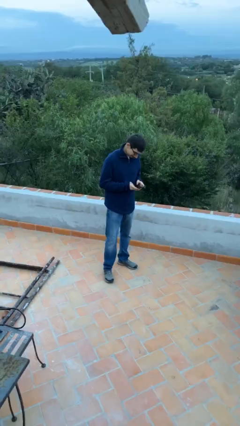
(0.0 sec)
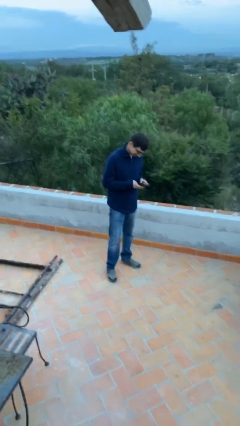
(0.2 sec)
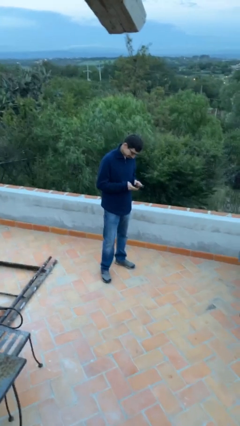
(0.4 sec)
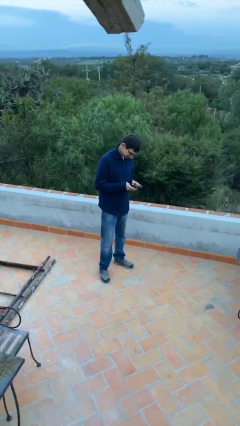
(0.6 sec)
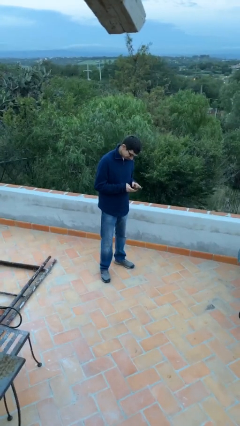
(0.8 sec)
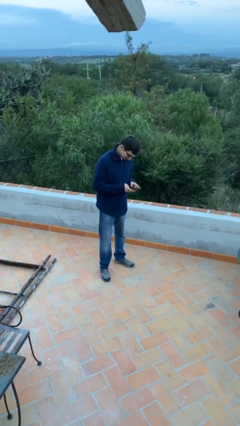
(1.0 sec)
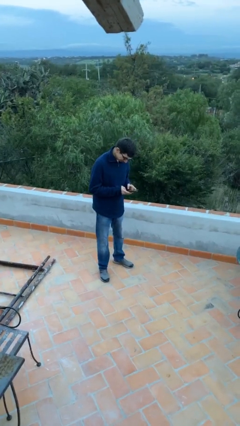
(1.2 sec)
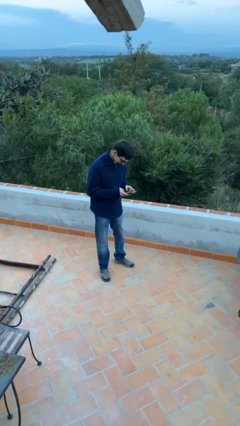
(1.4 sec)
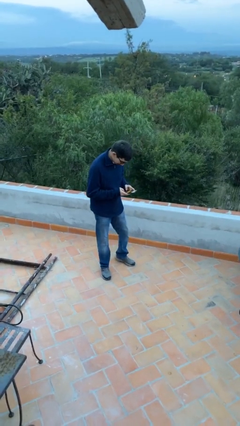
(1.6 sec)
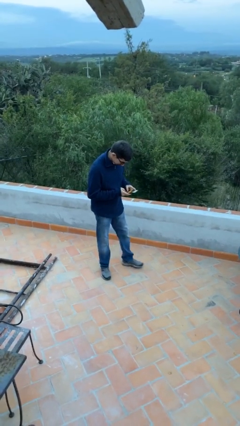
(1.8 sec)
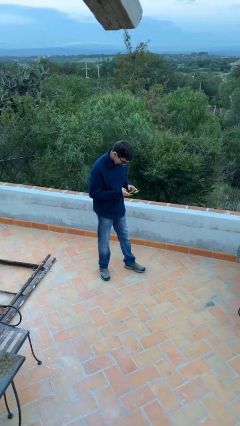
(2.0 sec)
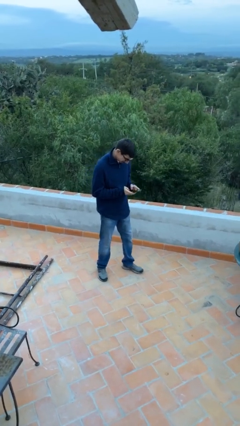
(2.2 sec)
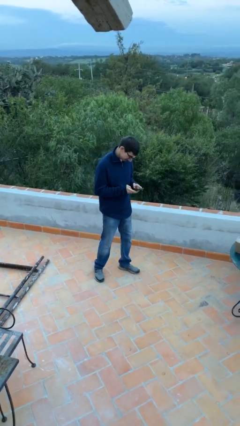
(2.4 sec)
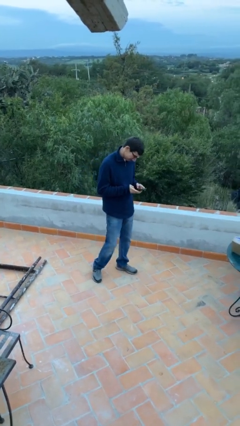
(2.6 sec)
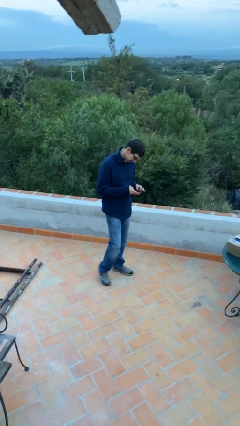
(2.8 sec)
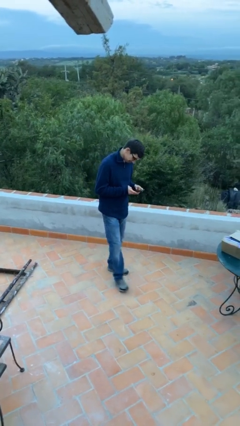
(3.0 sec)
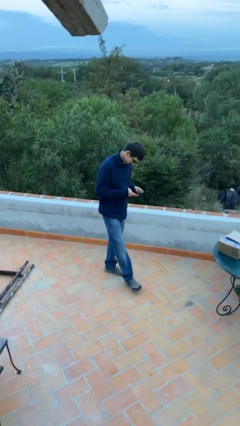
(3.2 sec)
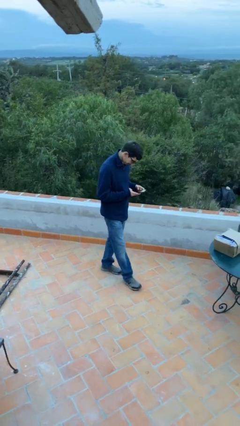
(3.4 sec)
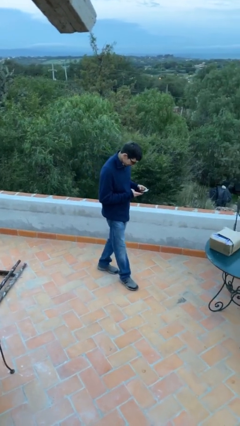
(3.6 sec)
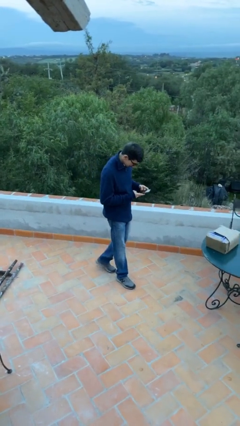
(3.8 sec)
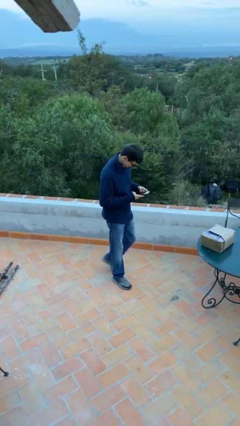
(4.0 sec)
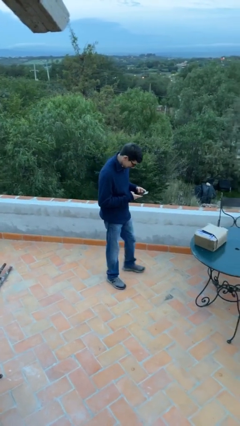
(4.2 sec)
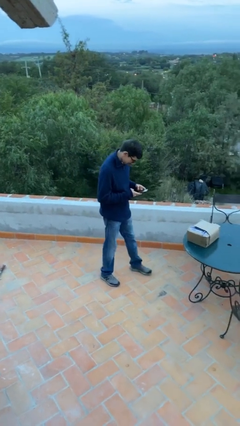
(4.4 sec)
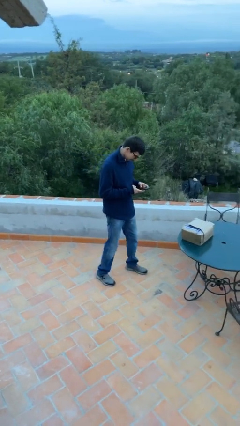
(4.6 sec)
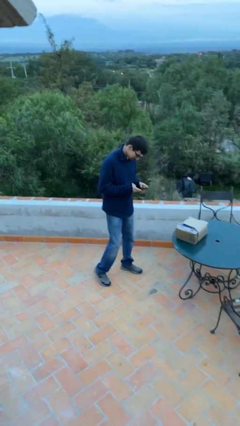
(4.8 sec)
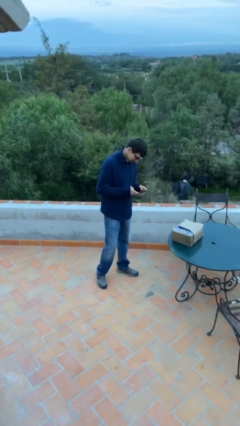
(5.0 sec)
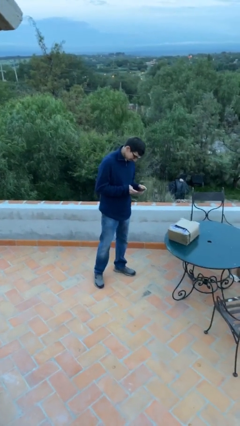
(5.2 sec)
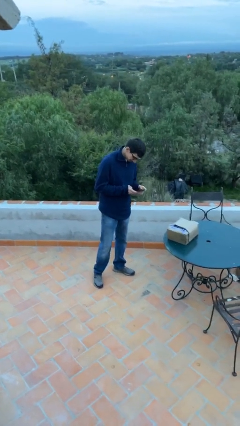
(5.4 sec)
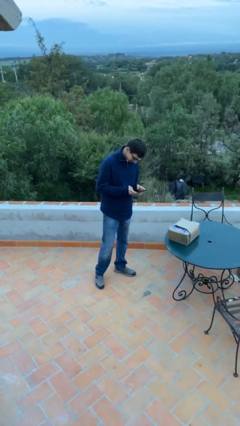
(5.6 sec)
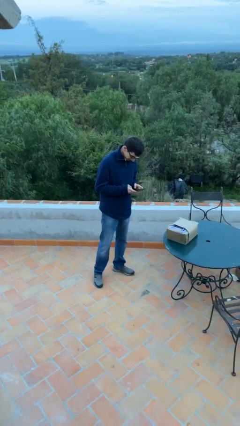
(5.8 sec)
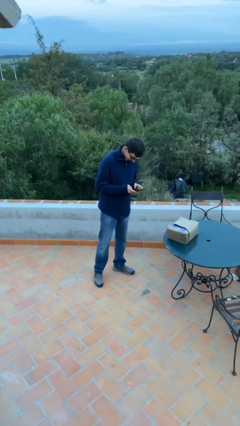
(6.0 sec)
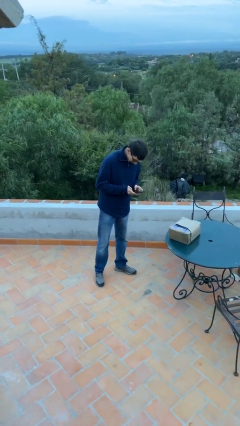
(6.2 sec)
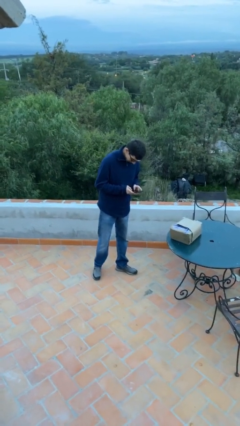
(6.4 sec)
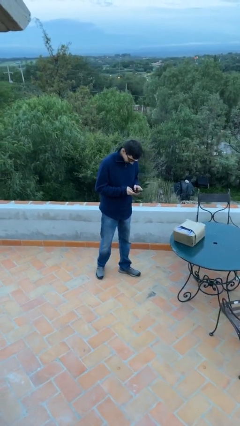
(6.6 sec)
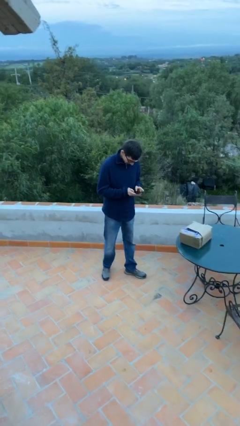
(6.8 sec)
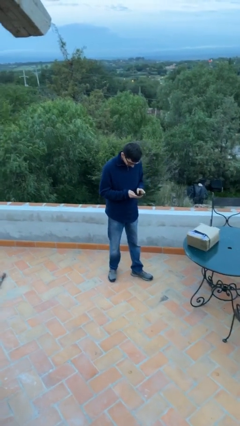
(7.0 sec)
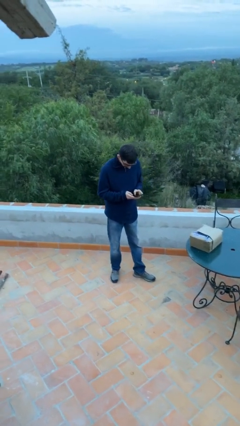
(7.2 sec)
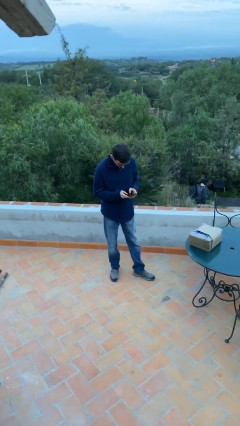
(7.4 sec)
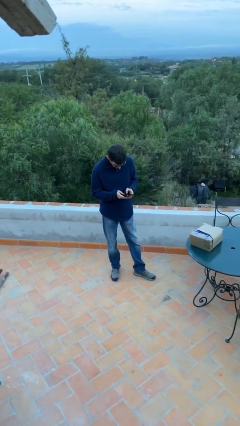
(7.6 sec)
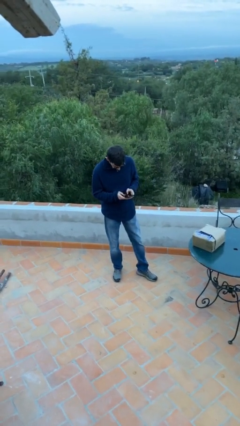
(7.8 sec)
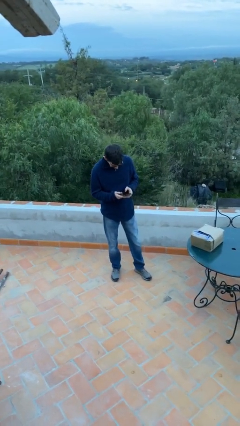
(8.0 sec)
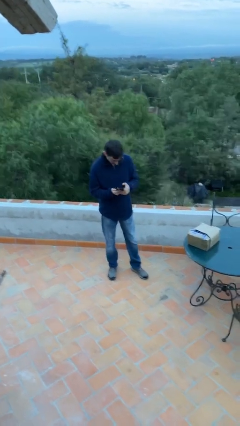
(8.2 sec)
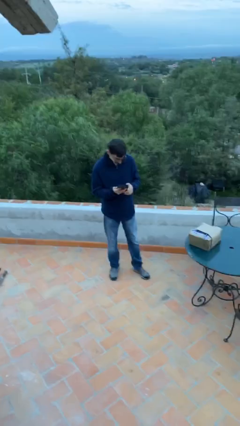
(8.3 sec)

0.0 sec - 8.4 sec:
person texts on phone

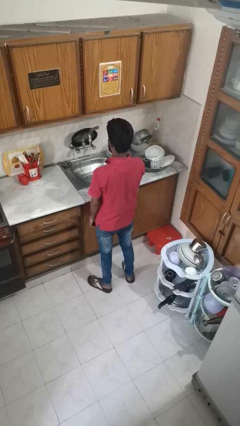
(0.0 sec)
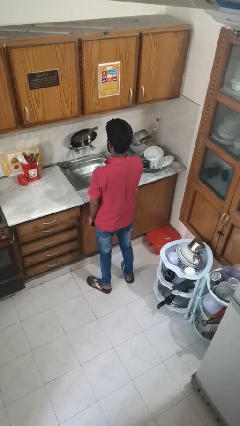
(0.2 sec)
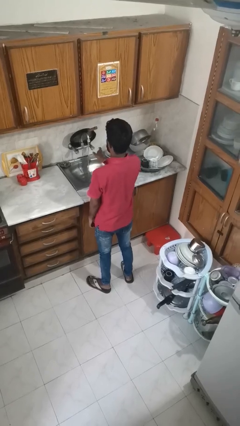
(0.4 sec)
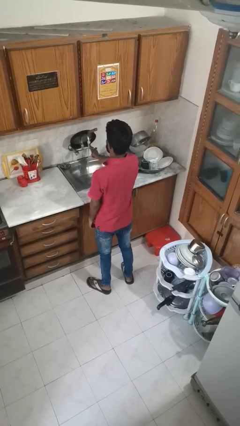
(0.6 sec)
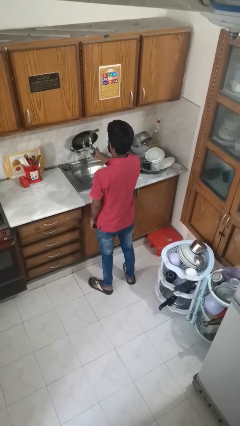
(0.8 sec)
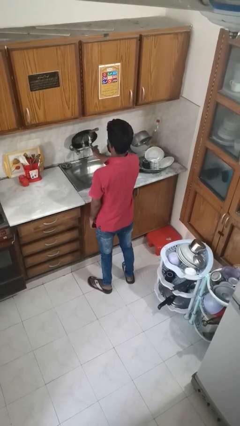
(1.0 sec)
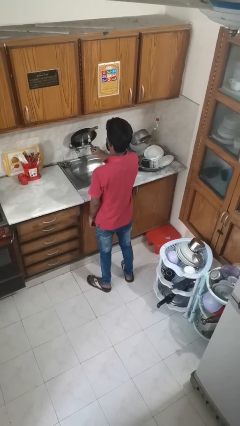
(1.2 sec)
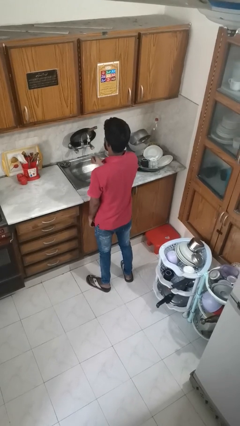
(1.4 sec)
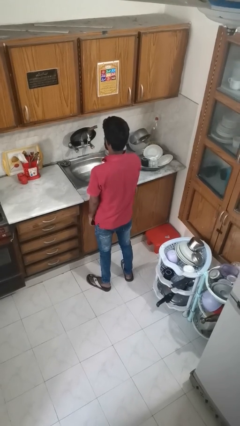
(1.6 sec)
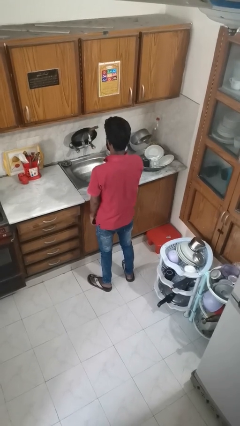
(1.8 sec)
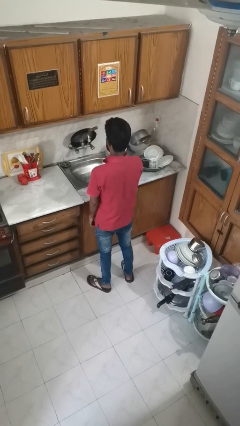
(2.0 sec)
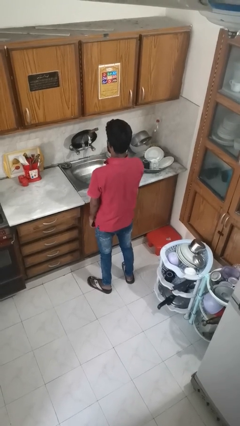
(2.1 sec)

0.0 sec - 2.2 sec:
person turns off faucet

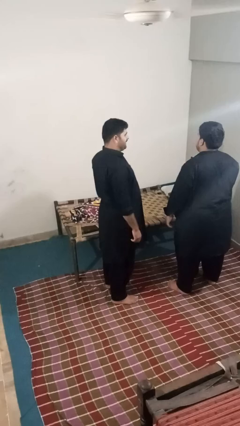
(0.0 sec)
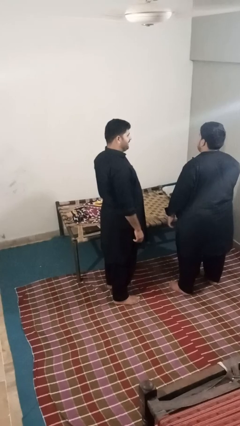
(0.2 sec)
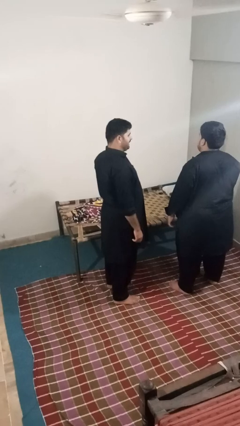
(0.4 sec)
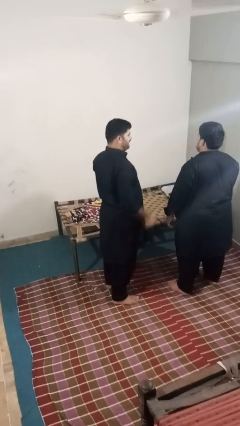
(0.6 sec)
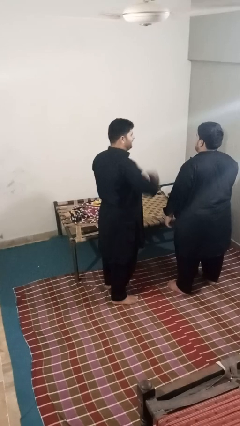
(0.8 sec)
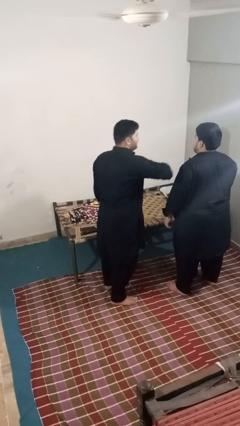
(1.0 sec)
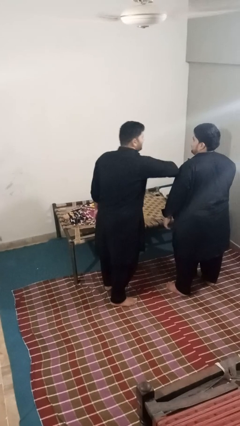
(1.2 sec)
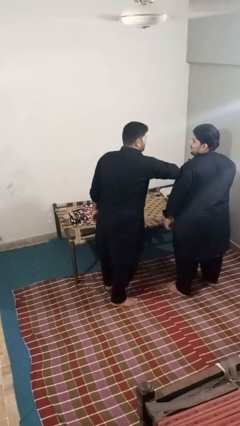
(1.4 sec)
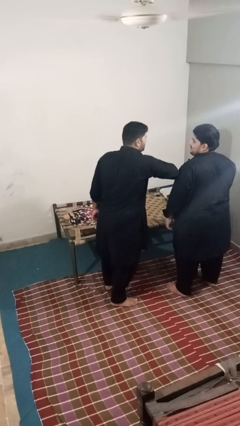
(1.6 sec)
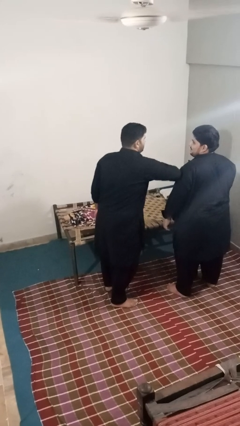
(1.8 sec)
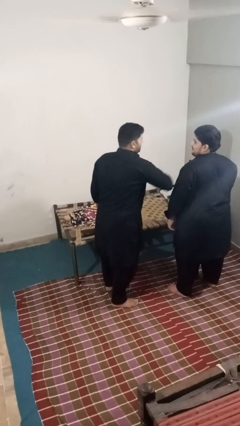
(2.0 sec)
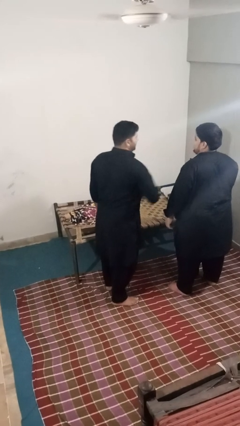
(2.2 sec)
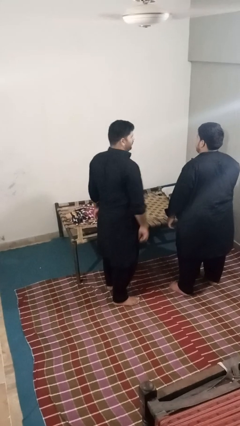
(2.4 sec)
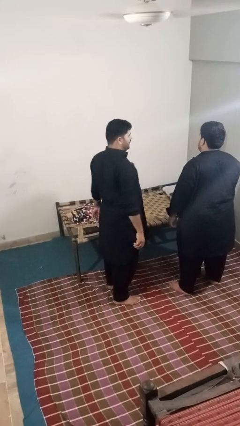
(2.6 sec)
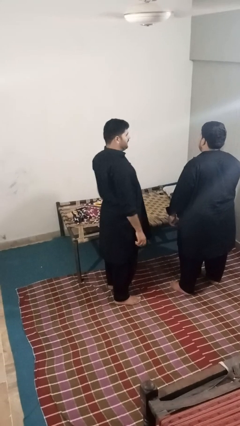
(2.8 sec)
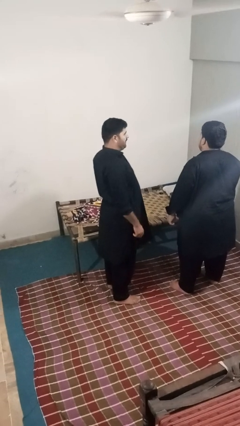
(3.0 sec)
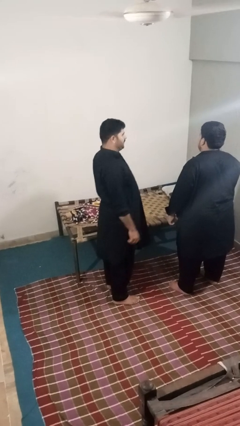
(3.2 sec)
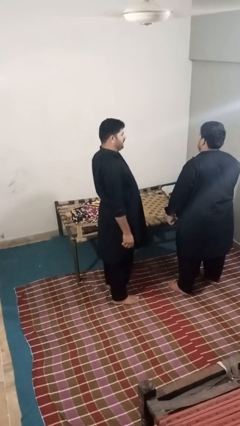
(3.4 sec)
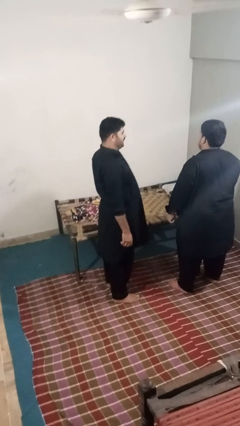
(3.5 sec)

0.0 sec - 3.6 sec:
person nudges person with elbow

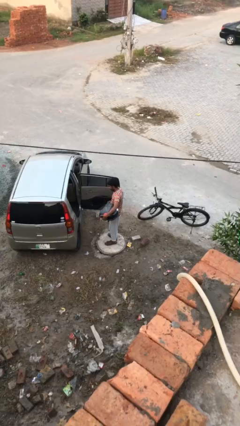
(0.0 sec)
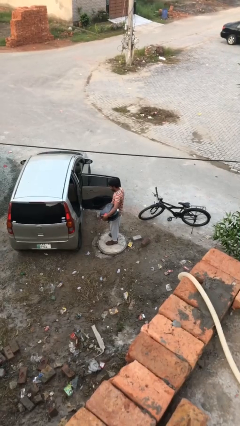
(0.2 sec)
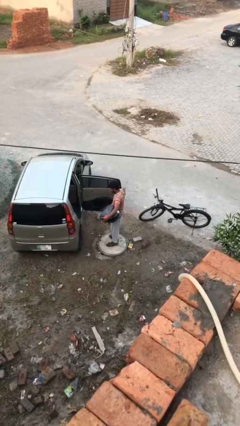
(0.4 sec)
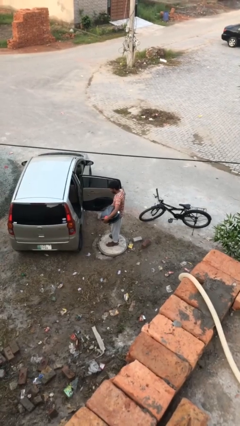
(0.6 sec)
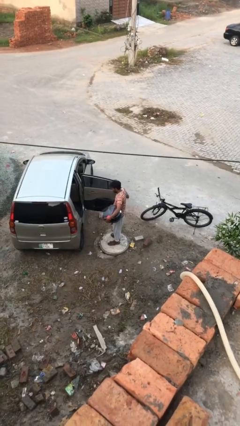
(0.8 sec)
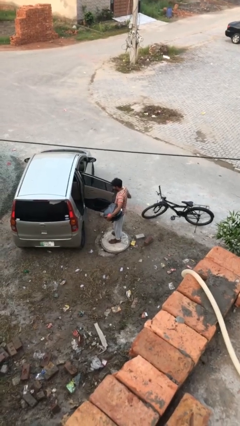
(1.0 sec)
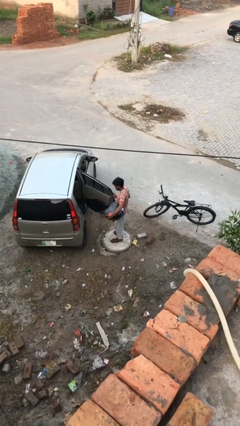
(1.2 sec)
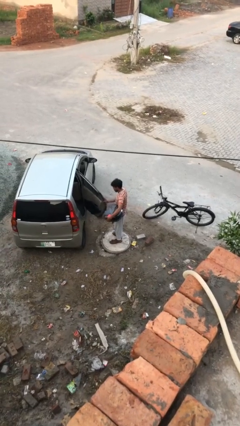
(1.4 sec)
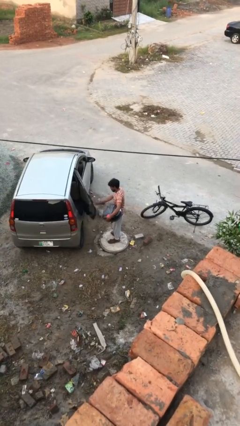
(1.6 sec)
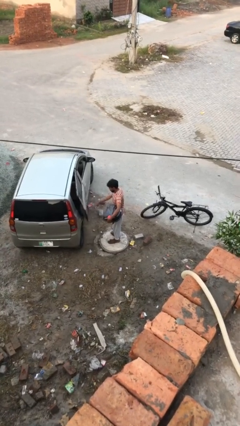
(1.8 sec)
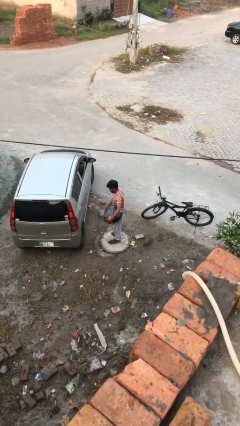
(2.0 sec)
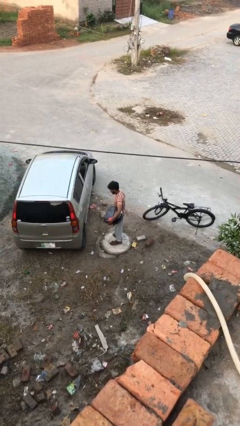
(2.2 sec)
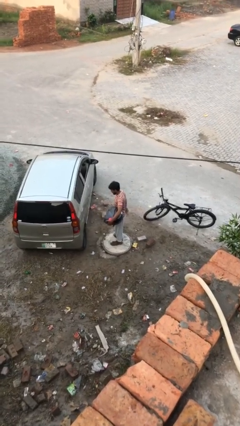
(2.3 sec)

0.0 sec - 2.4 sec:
person closes car door

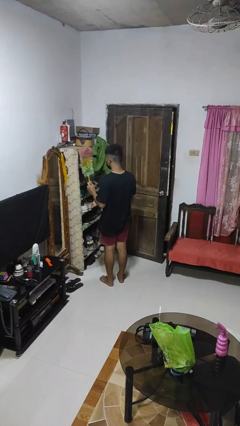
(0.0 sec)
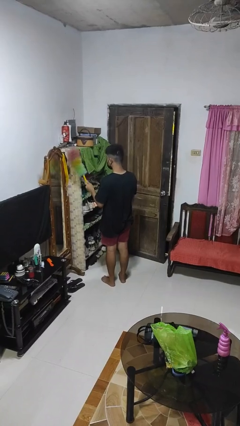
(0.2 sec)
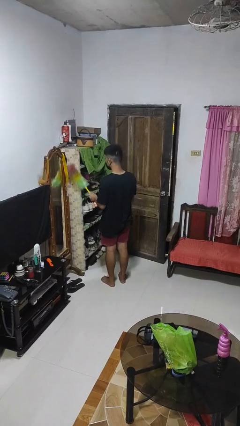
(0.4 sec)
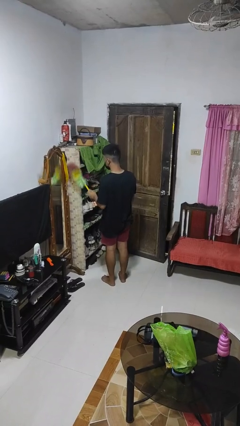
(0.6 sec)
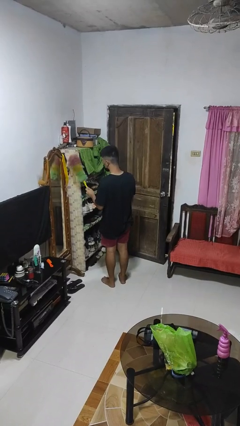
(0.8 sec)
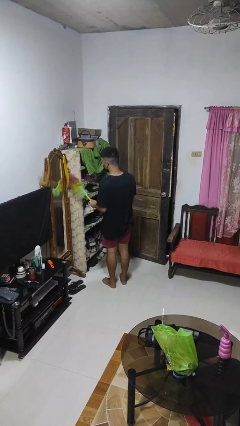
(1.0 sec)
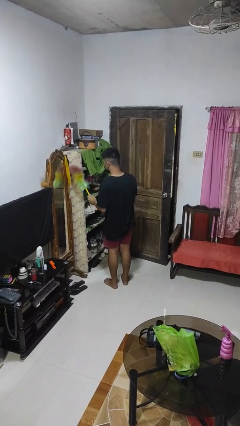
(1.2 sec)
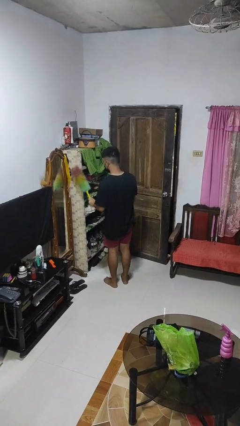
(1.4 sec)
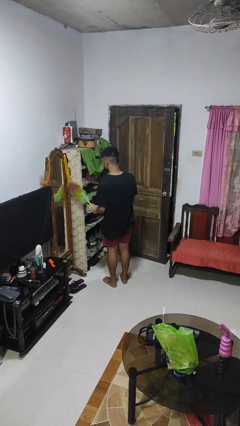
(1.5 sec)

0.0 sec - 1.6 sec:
person dusts furniture
